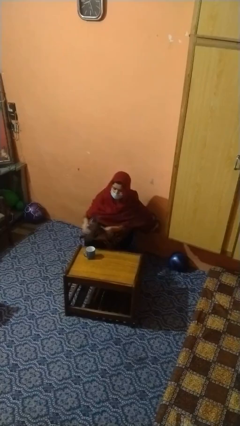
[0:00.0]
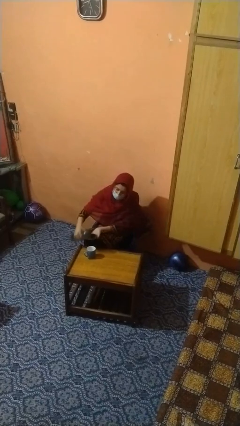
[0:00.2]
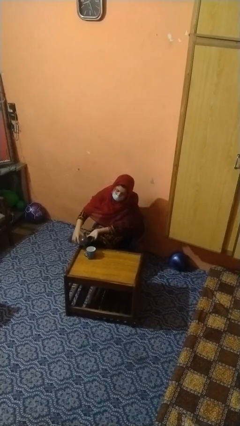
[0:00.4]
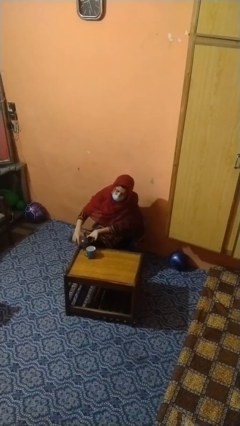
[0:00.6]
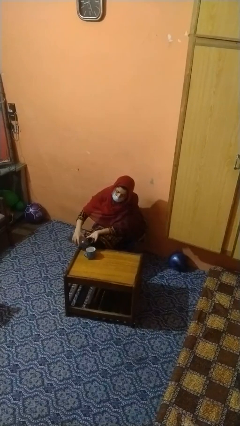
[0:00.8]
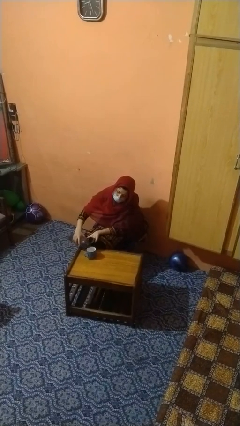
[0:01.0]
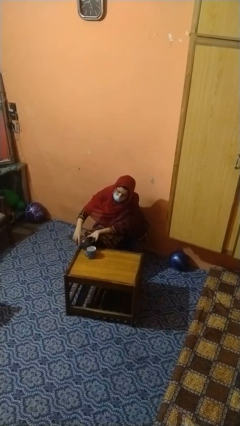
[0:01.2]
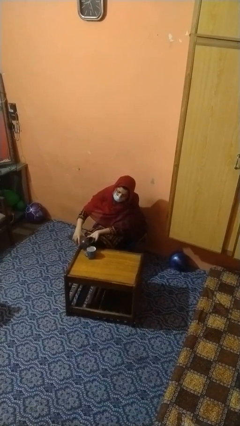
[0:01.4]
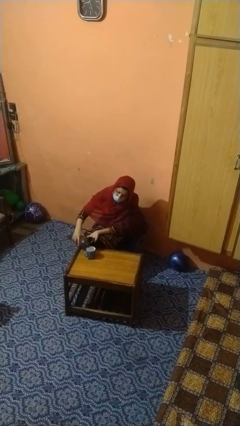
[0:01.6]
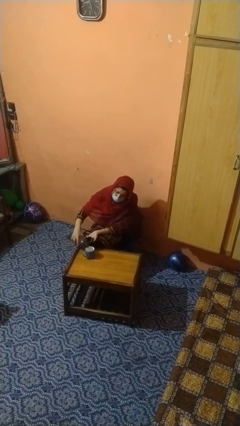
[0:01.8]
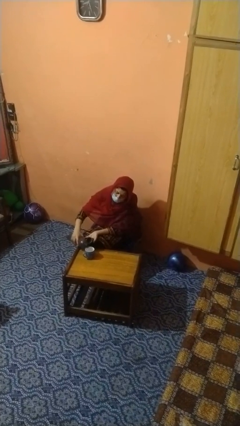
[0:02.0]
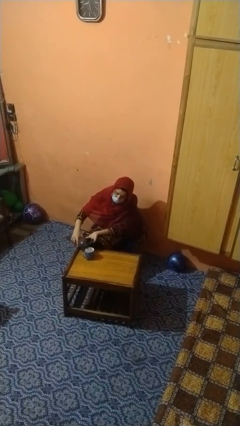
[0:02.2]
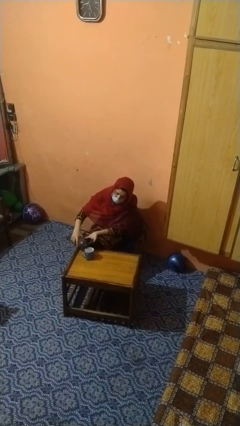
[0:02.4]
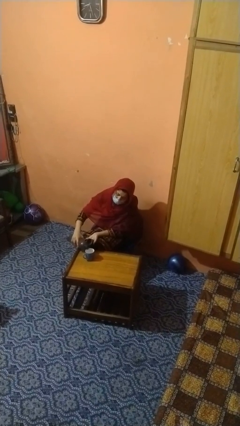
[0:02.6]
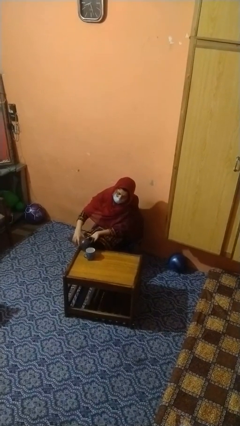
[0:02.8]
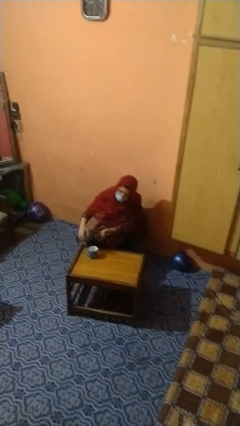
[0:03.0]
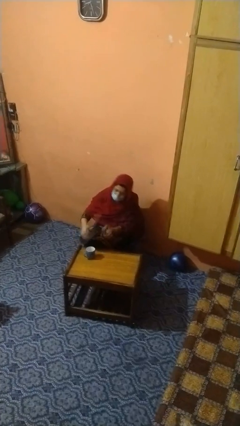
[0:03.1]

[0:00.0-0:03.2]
person pours liquid into cup

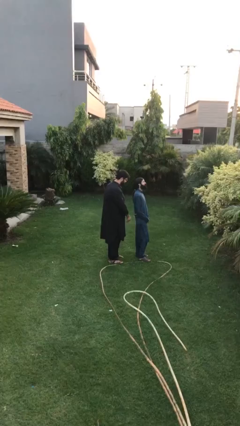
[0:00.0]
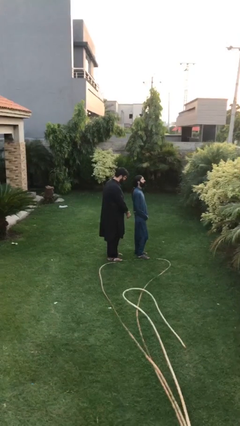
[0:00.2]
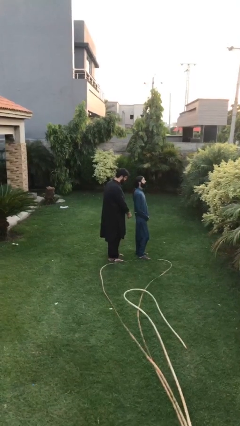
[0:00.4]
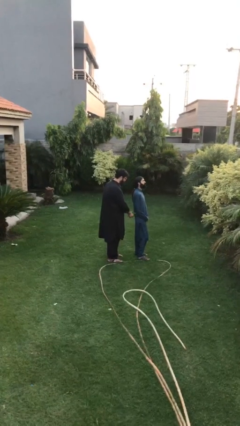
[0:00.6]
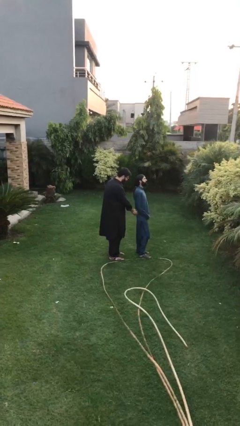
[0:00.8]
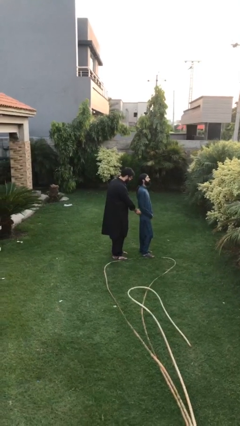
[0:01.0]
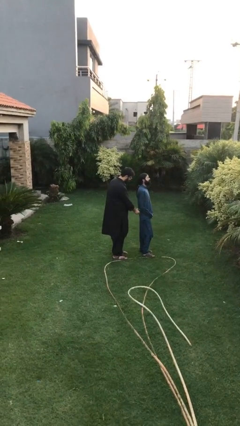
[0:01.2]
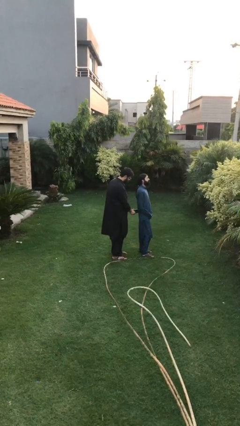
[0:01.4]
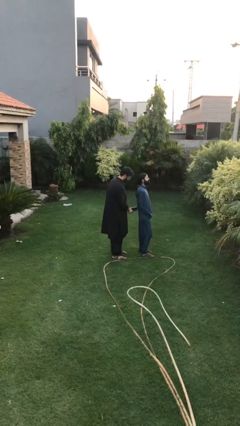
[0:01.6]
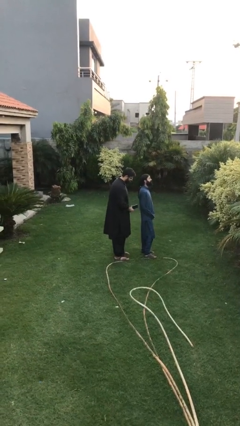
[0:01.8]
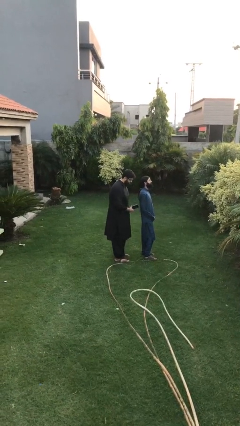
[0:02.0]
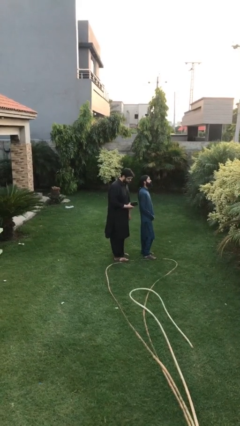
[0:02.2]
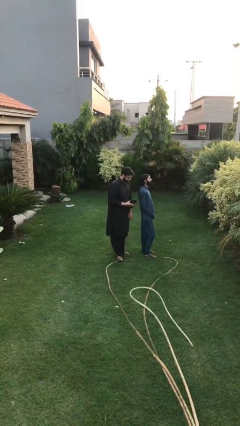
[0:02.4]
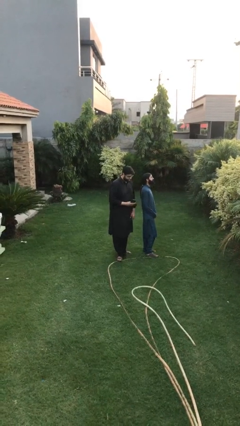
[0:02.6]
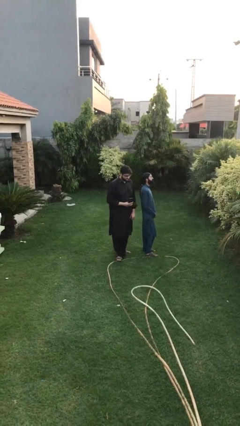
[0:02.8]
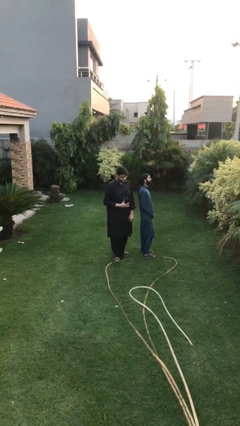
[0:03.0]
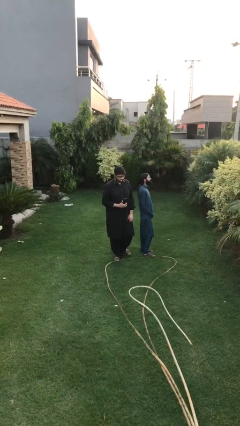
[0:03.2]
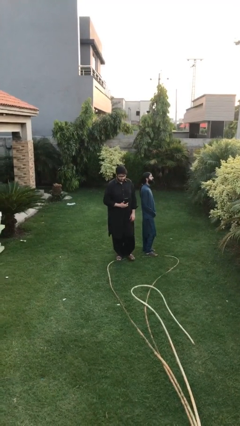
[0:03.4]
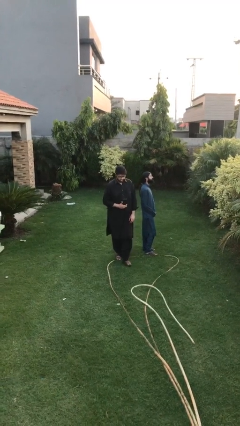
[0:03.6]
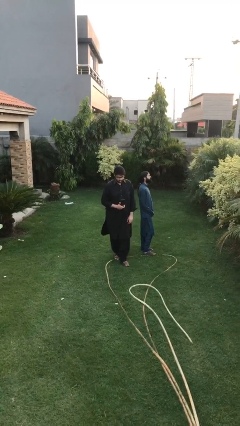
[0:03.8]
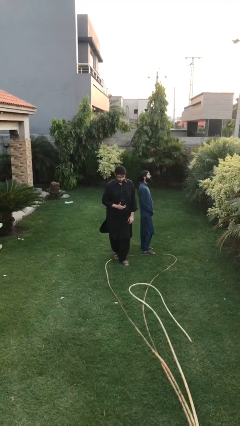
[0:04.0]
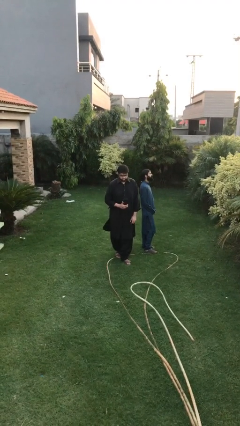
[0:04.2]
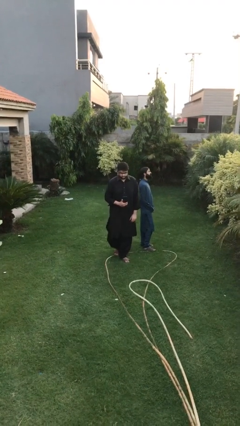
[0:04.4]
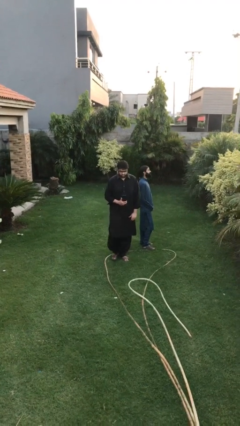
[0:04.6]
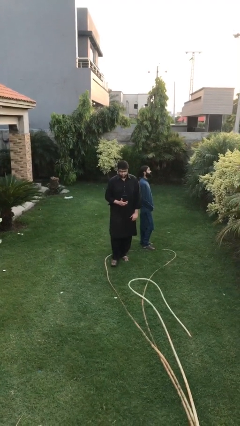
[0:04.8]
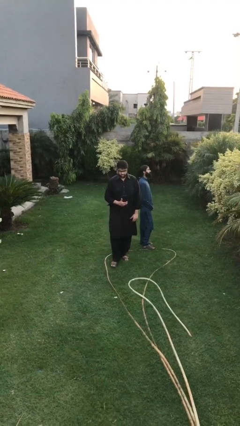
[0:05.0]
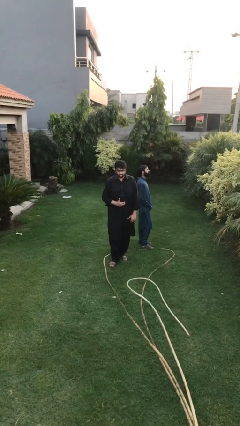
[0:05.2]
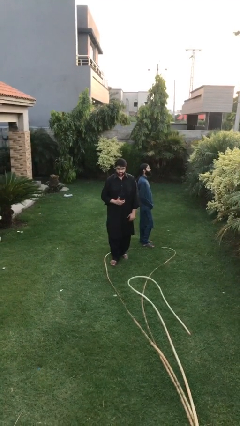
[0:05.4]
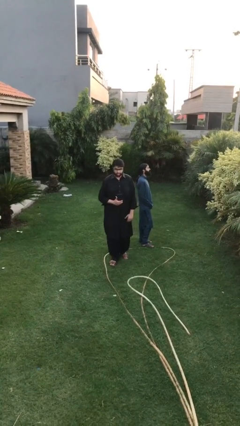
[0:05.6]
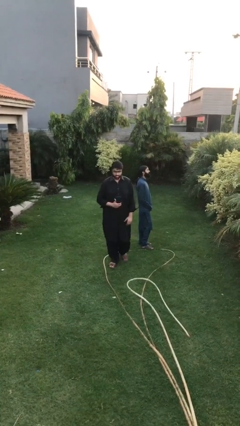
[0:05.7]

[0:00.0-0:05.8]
person steals object from person

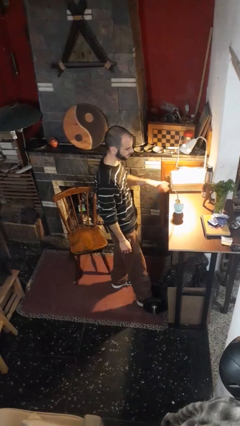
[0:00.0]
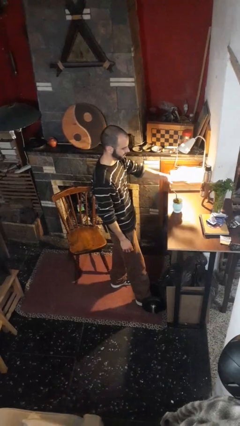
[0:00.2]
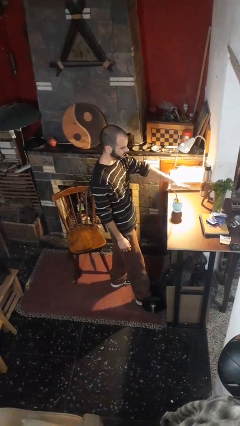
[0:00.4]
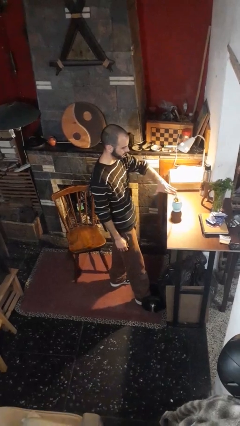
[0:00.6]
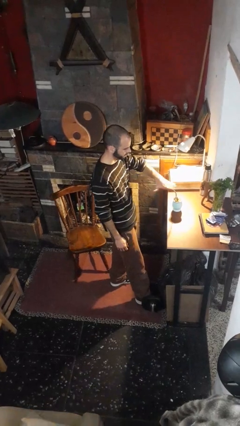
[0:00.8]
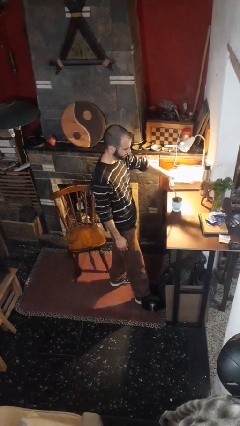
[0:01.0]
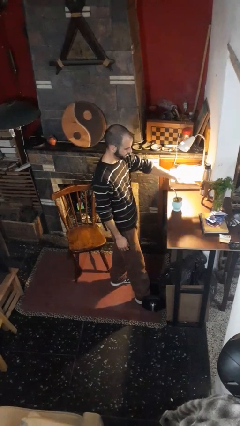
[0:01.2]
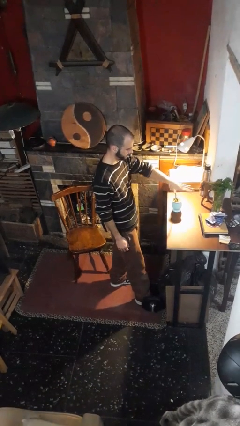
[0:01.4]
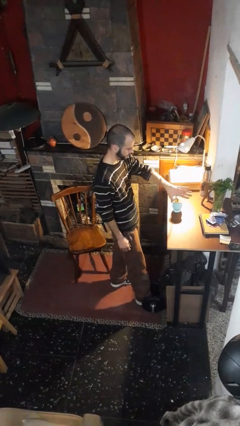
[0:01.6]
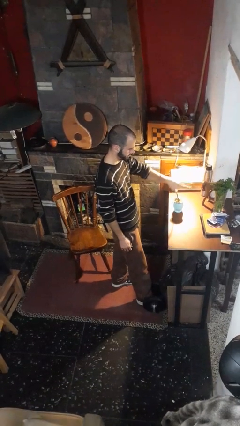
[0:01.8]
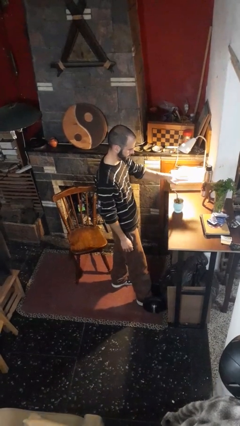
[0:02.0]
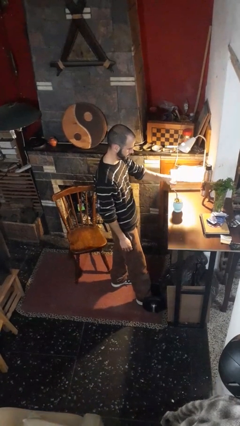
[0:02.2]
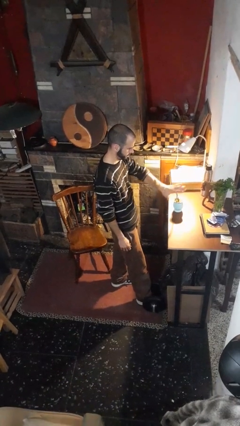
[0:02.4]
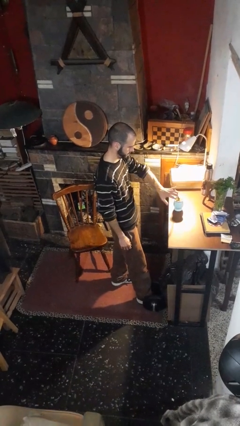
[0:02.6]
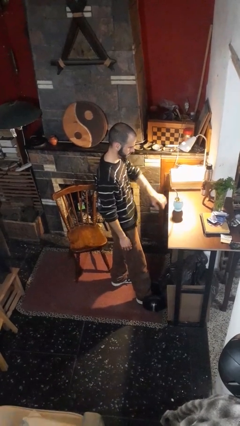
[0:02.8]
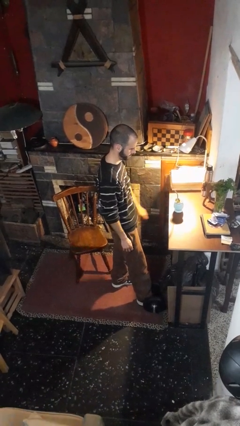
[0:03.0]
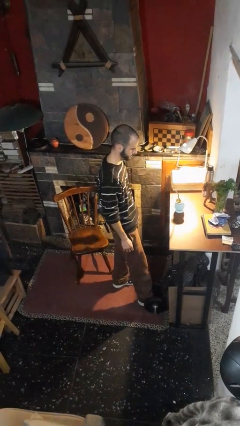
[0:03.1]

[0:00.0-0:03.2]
person waves hand over object

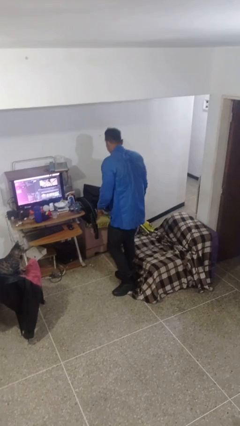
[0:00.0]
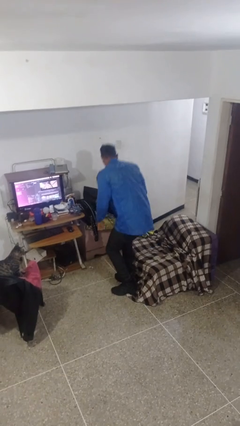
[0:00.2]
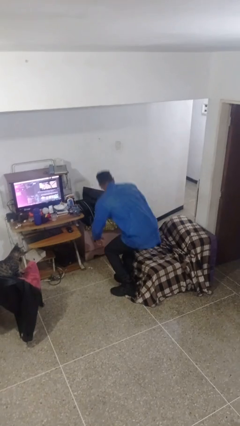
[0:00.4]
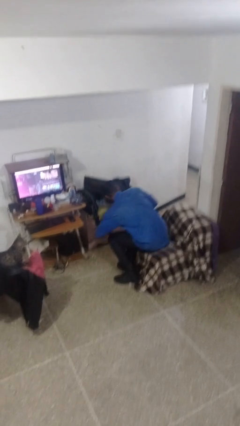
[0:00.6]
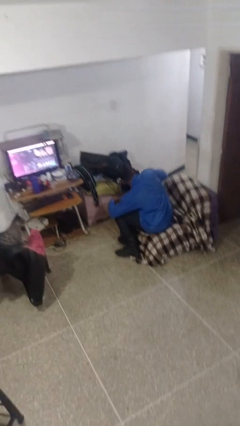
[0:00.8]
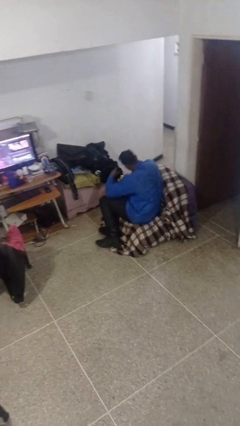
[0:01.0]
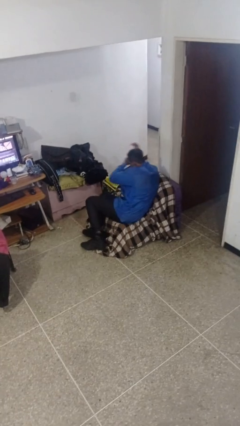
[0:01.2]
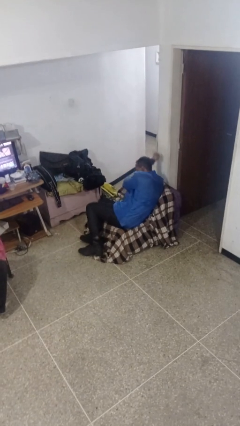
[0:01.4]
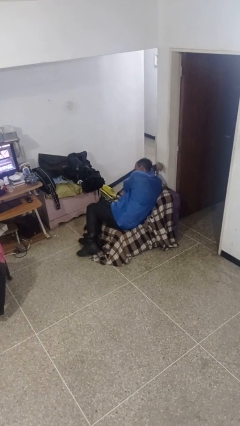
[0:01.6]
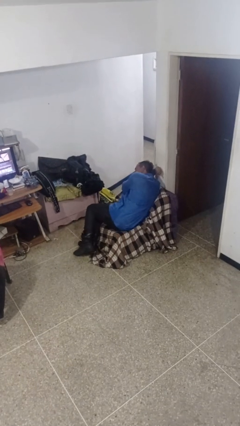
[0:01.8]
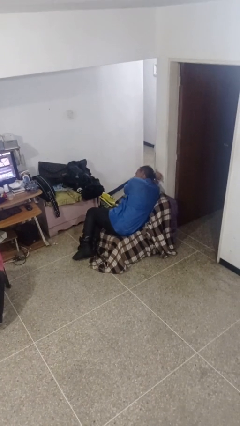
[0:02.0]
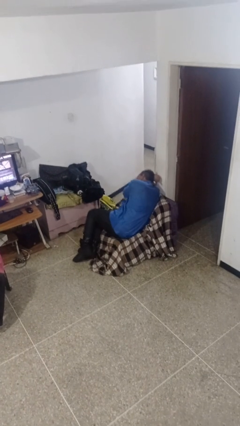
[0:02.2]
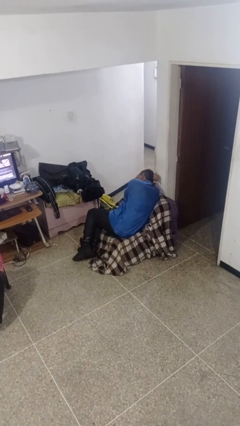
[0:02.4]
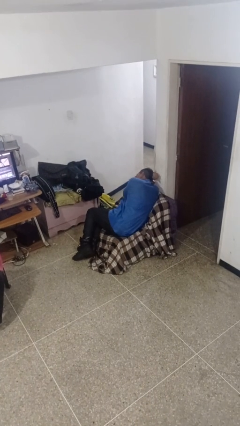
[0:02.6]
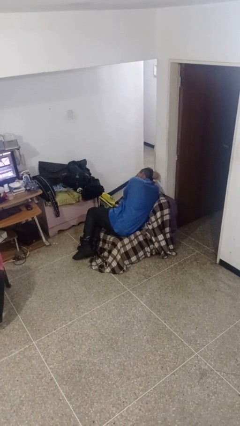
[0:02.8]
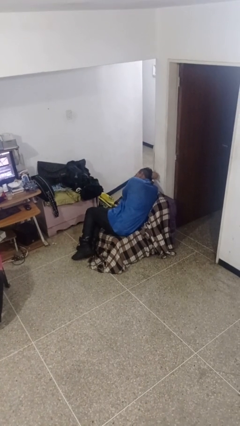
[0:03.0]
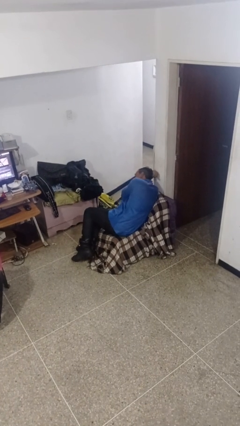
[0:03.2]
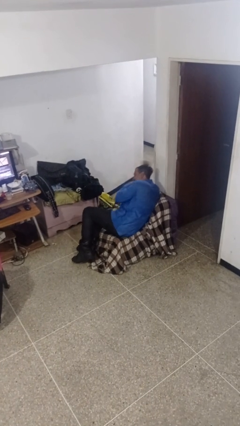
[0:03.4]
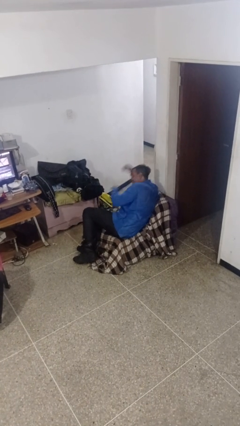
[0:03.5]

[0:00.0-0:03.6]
person lies down on couch

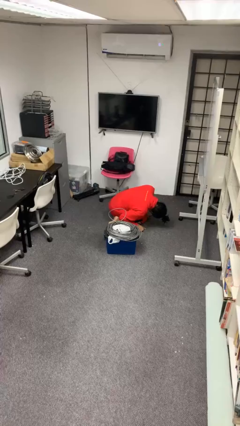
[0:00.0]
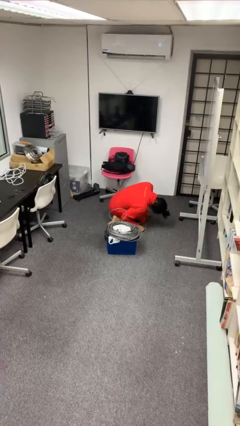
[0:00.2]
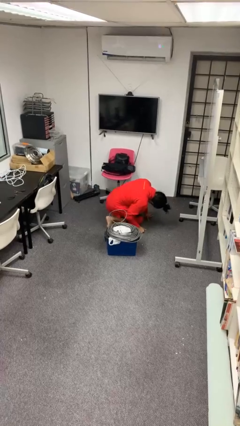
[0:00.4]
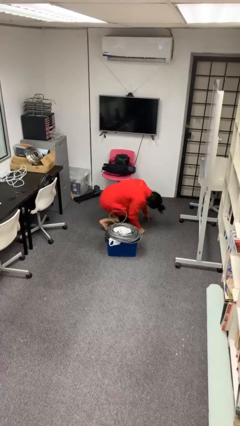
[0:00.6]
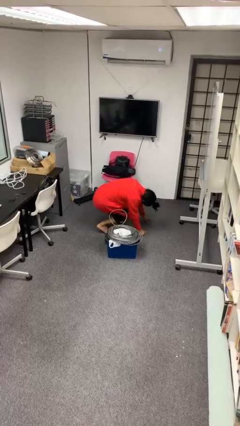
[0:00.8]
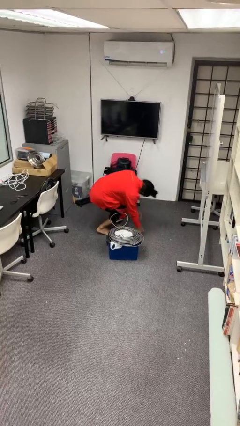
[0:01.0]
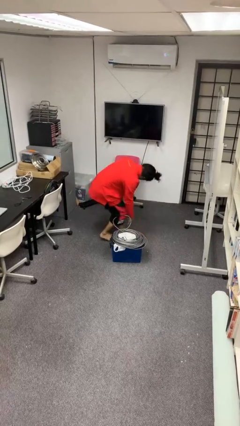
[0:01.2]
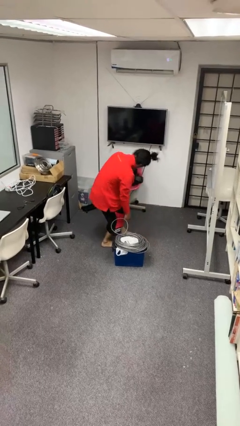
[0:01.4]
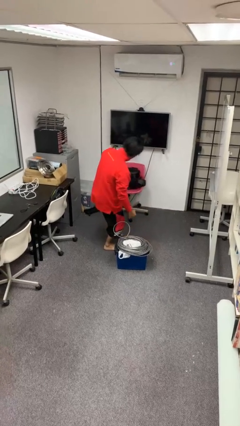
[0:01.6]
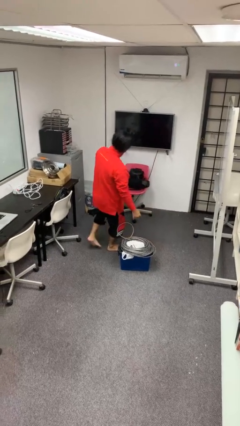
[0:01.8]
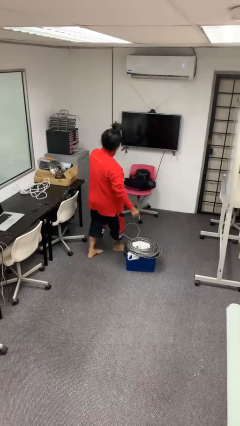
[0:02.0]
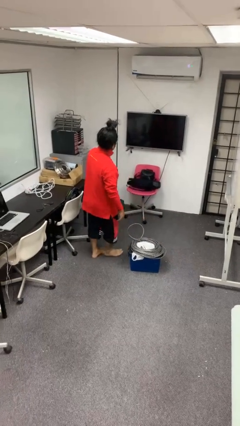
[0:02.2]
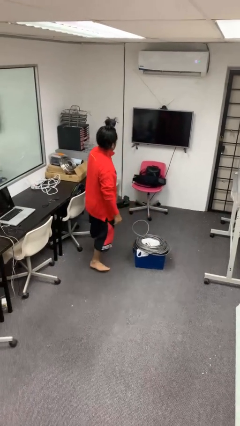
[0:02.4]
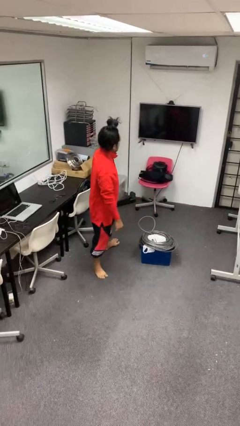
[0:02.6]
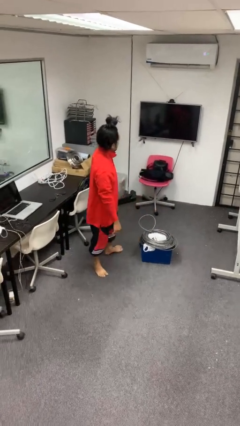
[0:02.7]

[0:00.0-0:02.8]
person stands up from floor
